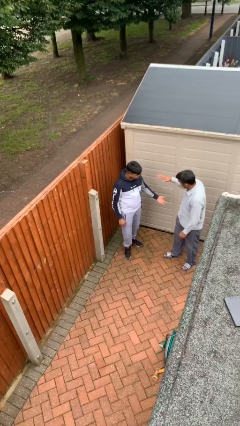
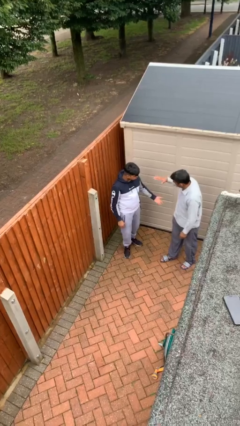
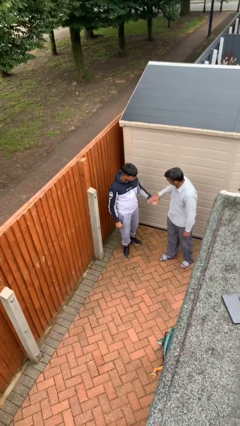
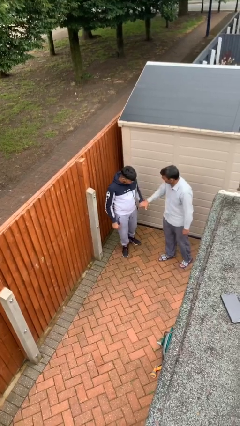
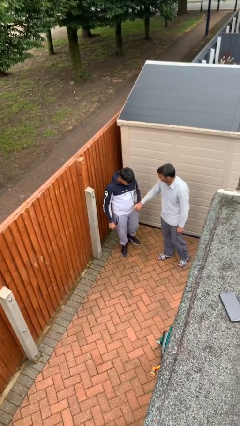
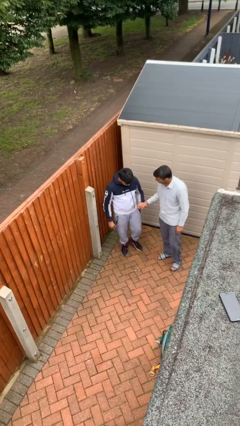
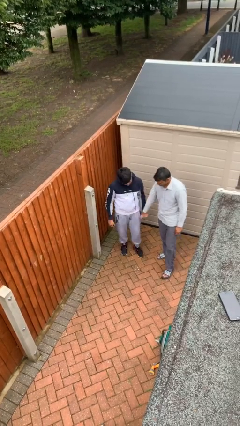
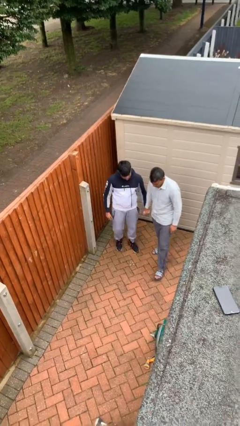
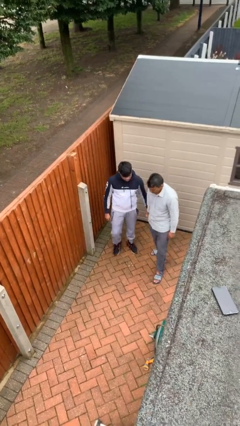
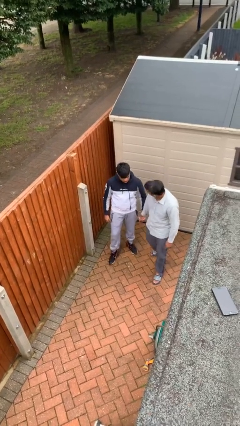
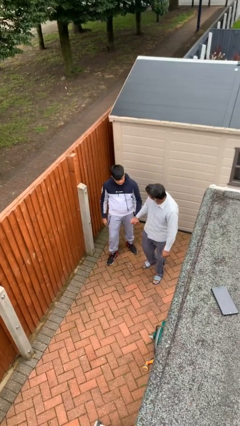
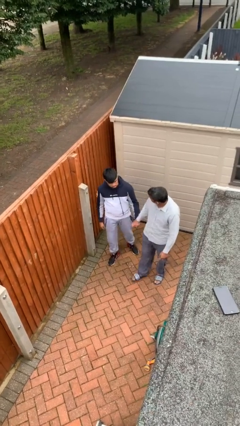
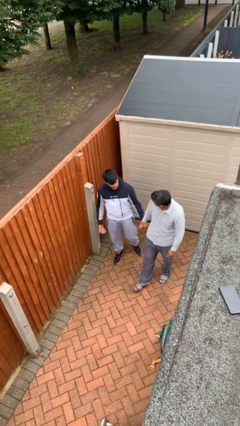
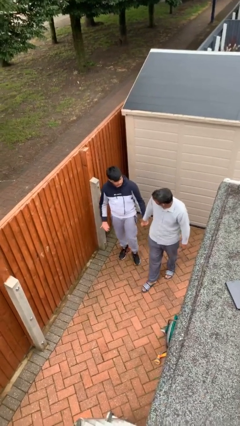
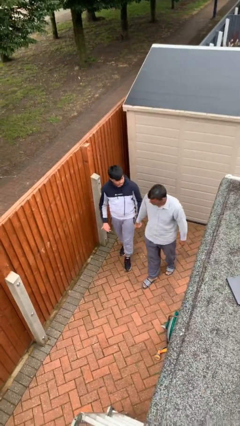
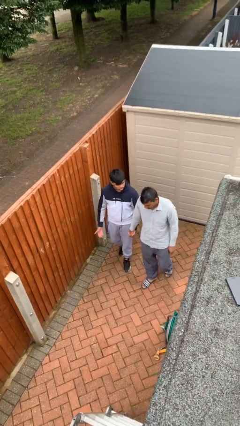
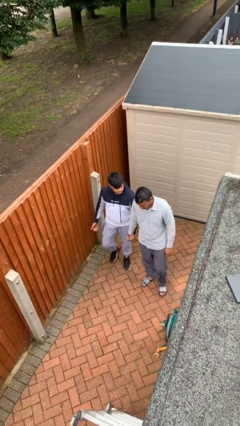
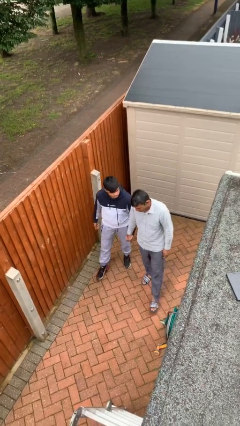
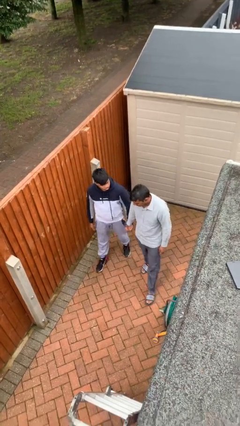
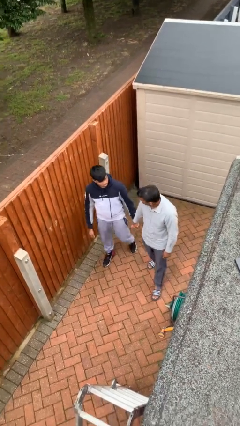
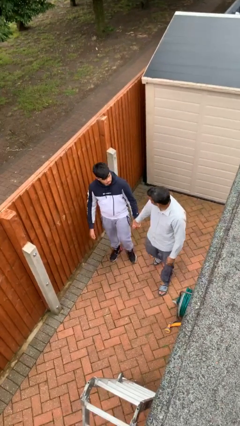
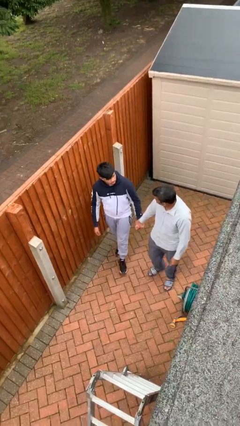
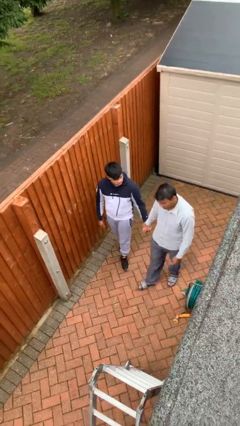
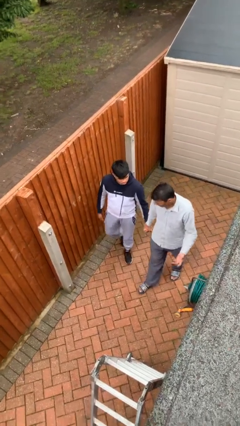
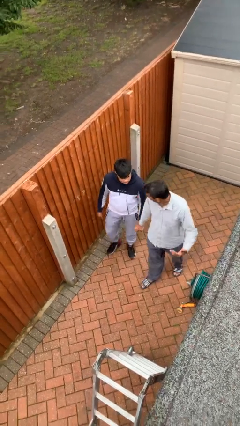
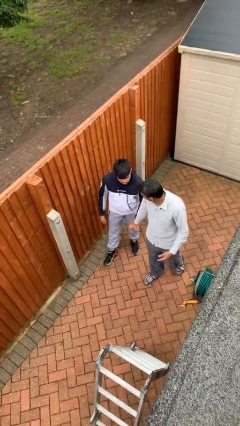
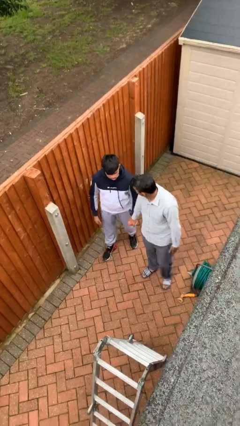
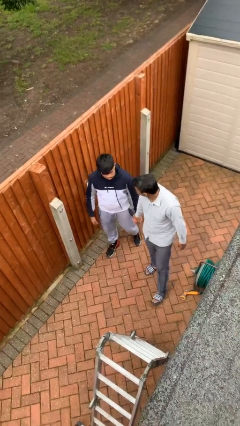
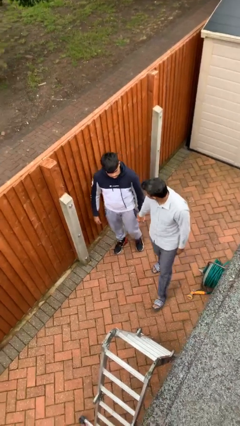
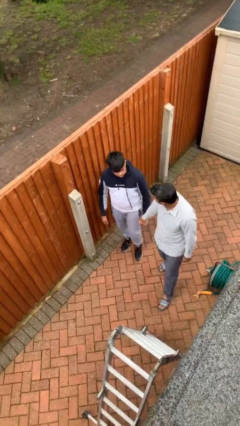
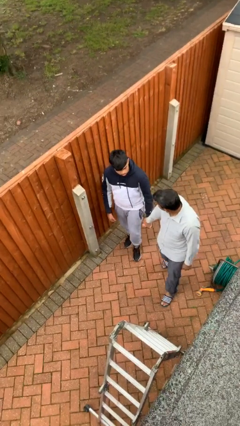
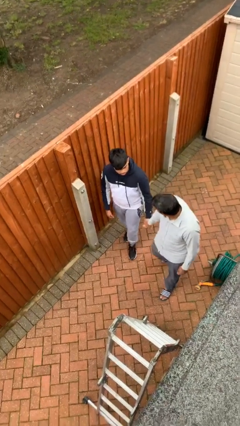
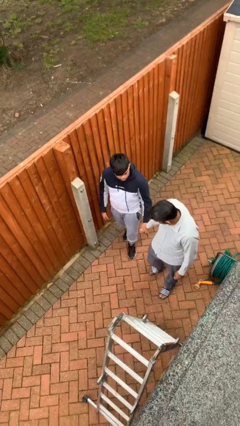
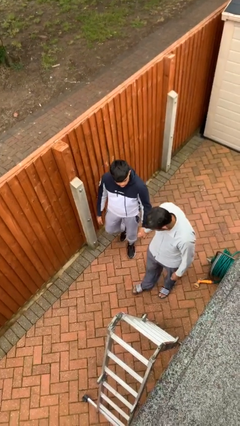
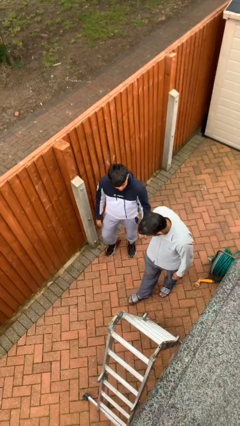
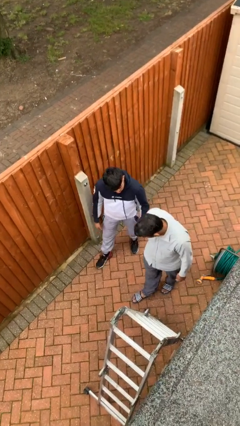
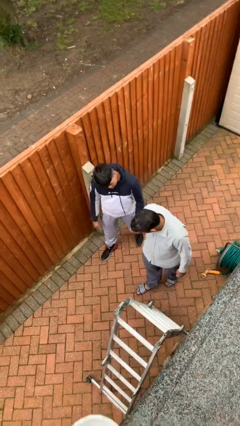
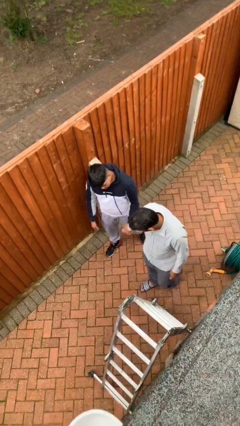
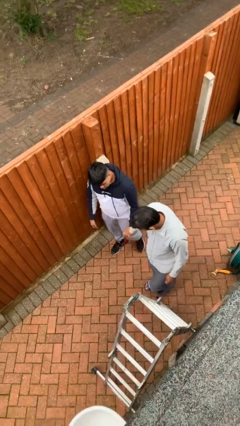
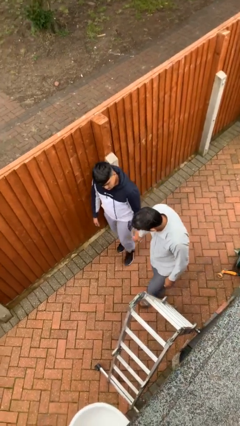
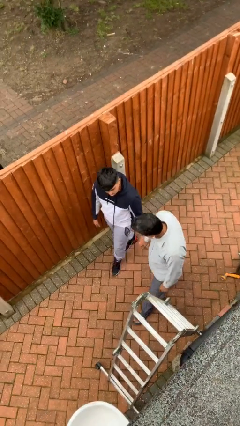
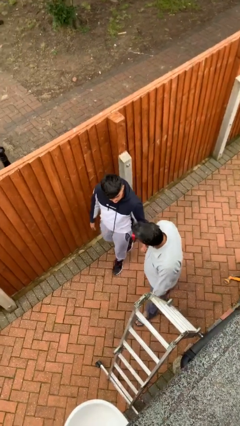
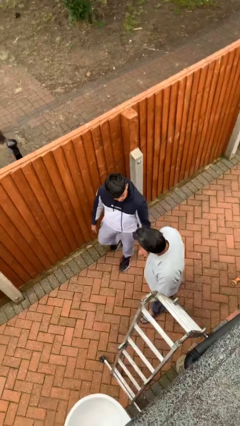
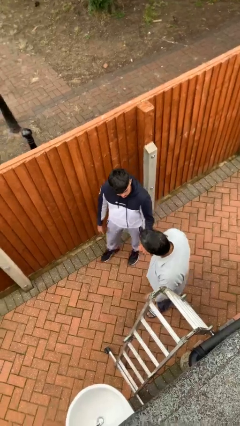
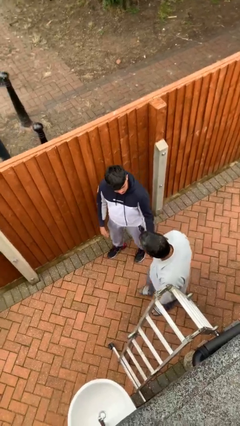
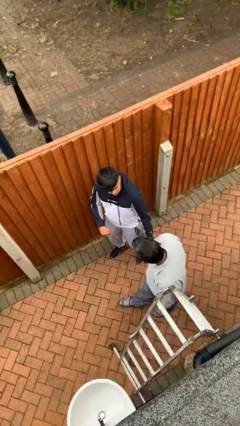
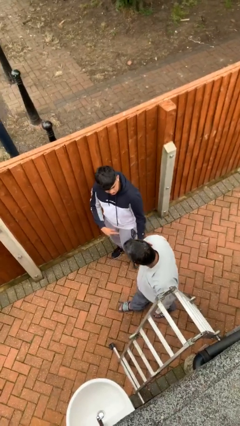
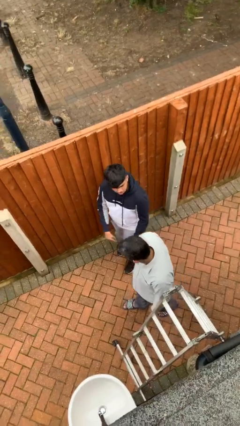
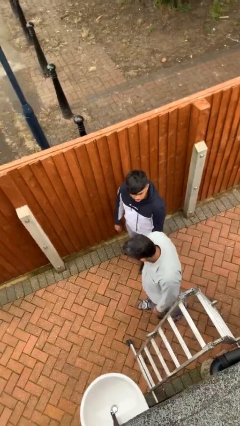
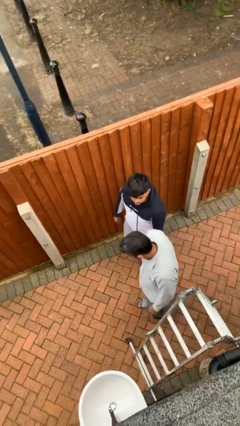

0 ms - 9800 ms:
person holds hand

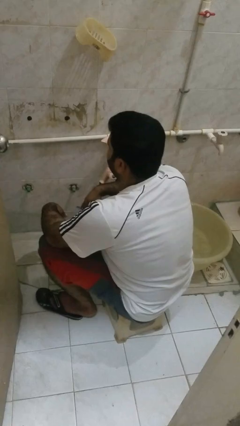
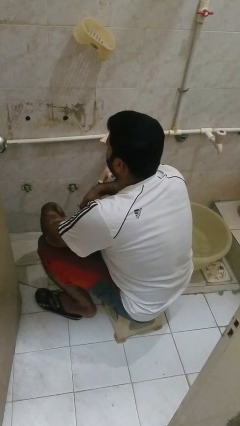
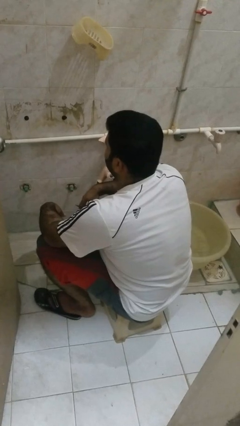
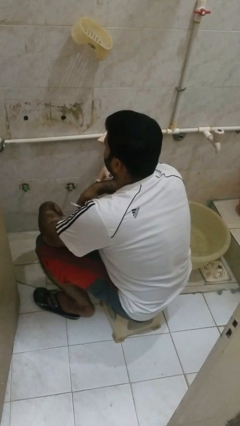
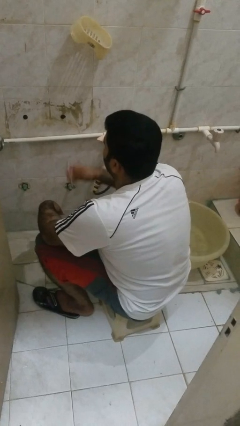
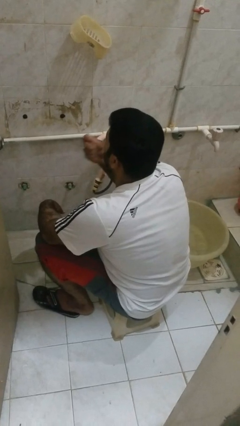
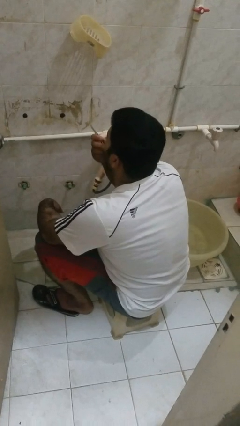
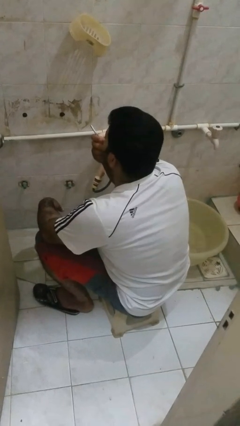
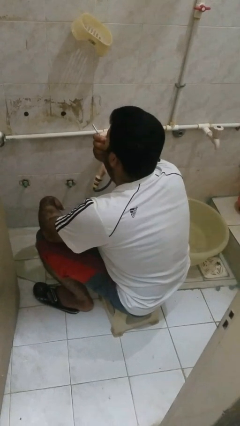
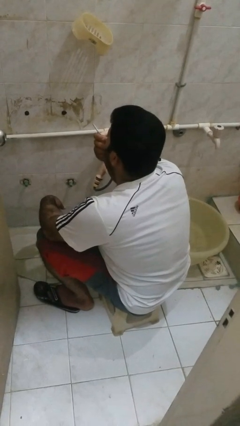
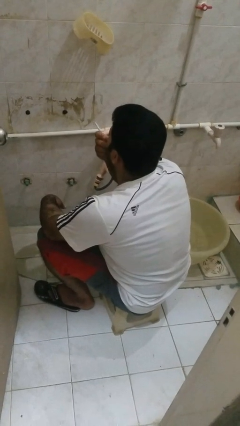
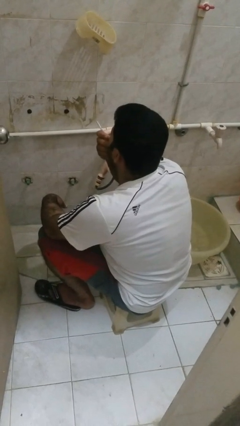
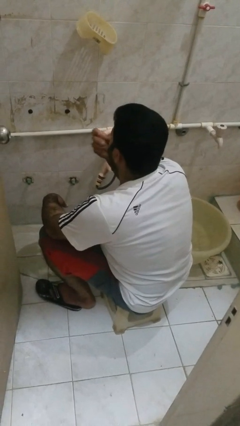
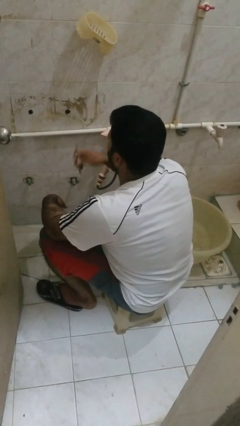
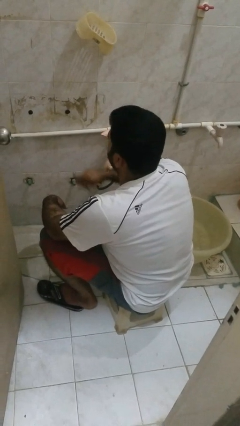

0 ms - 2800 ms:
person flosses

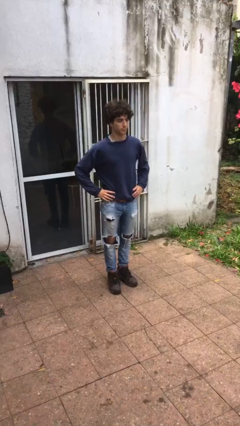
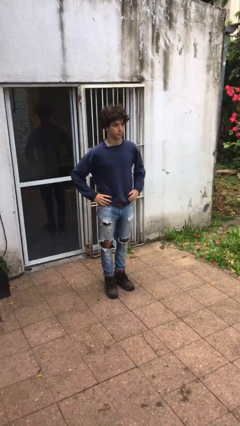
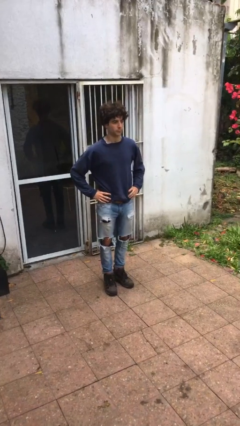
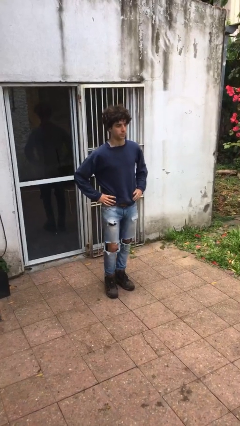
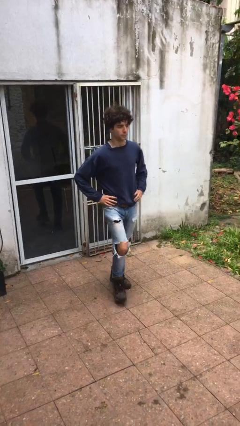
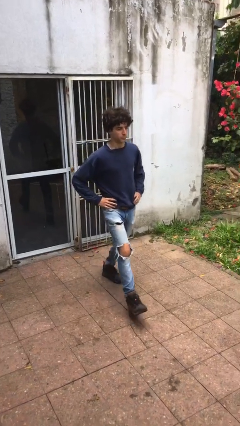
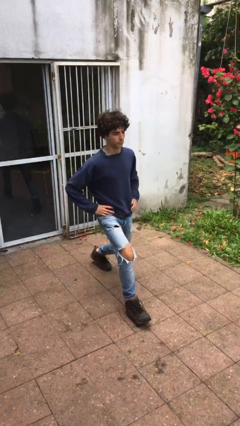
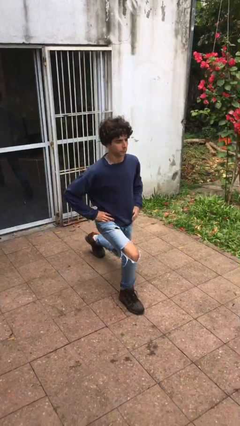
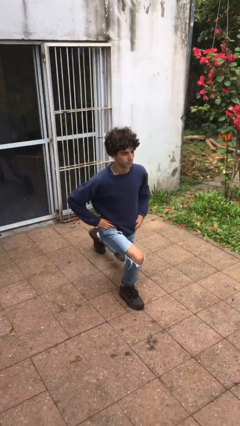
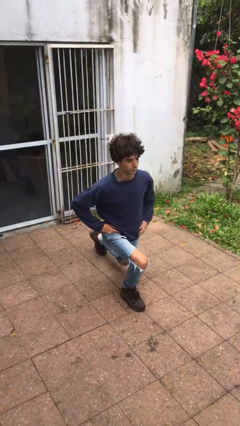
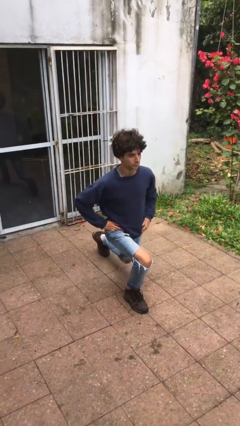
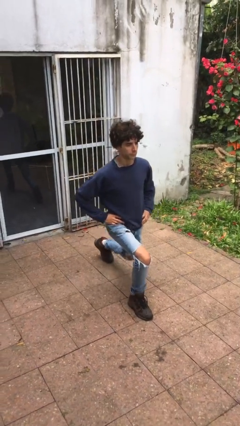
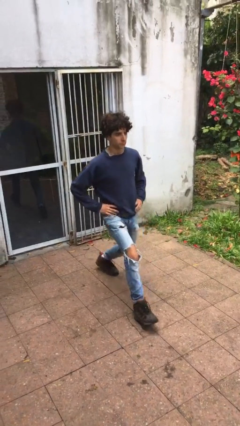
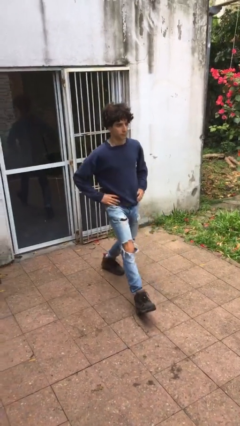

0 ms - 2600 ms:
person exercises with lunges

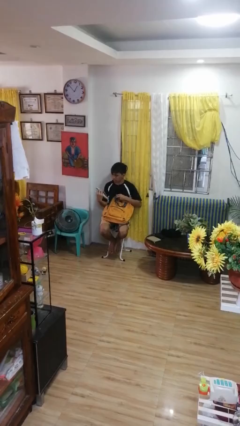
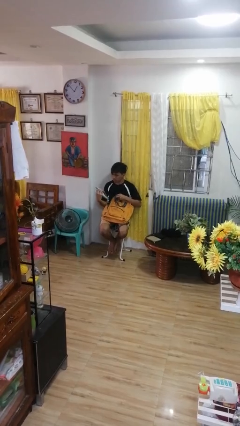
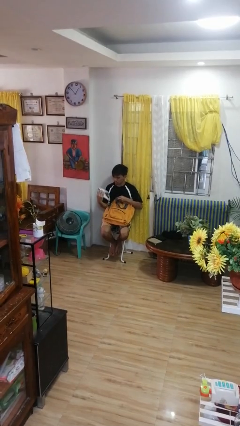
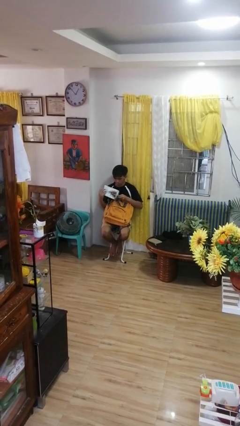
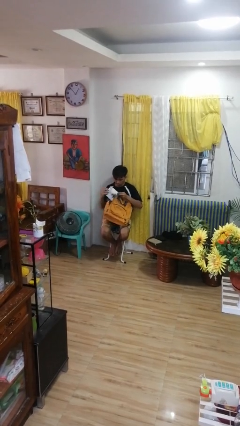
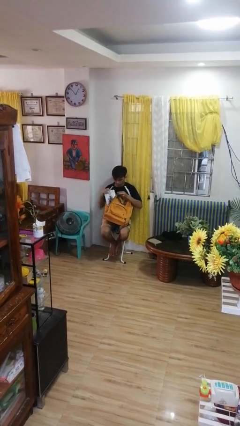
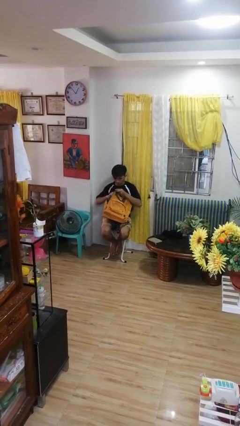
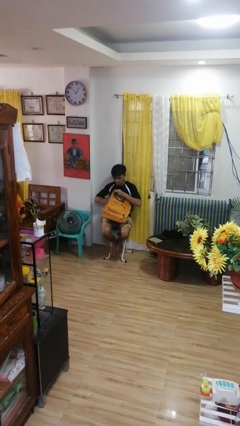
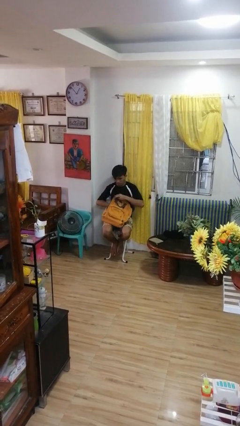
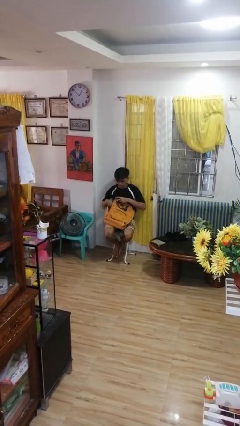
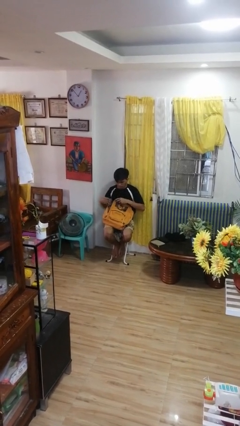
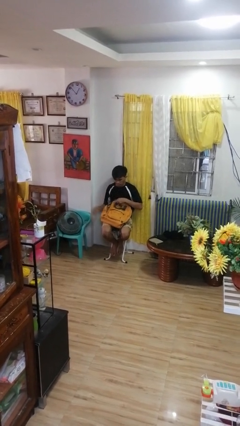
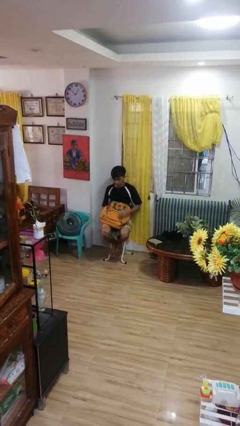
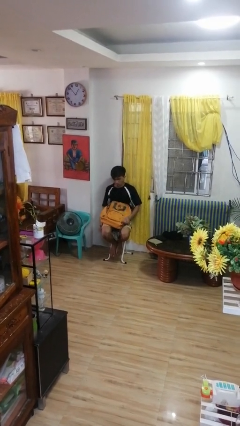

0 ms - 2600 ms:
person puts object into backpack
